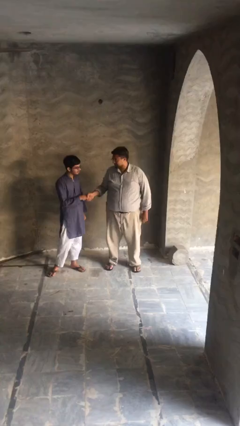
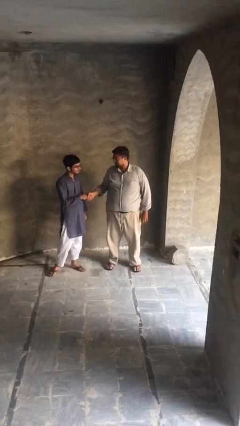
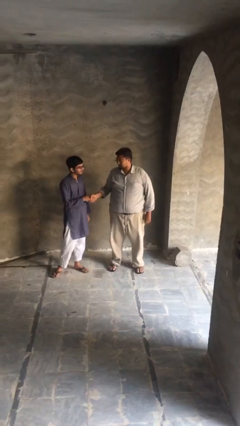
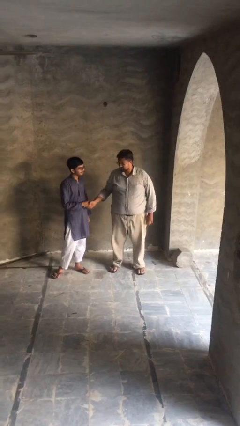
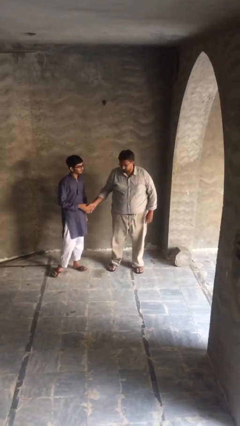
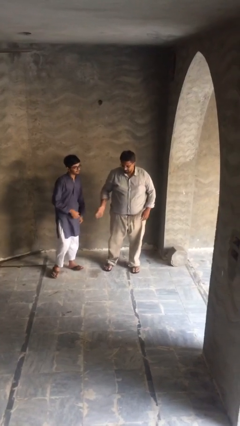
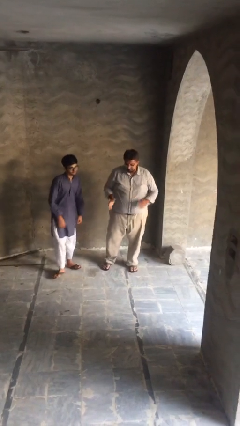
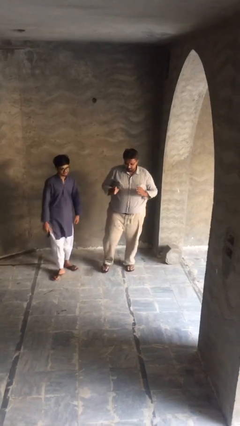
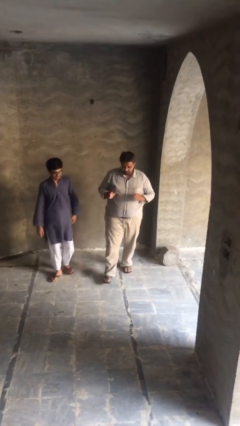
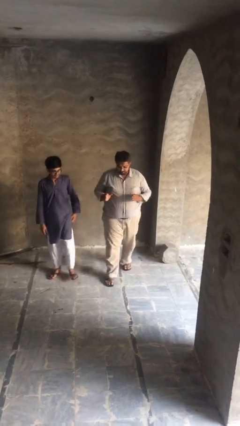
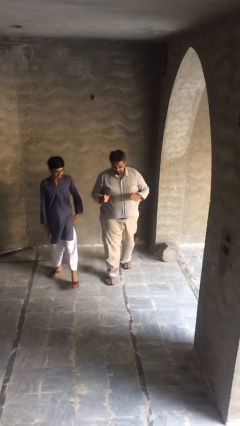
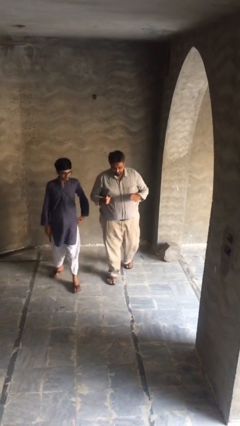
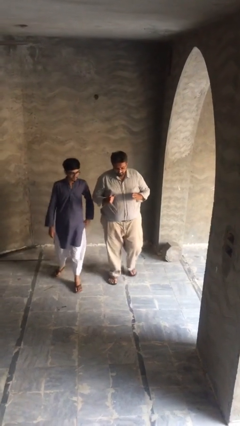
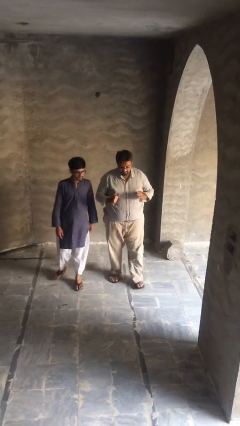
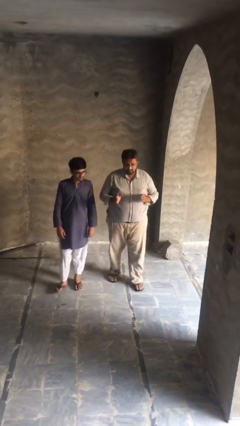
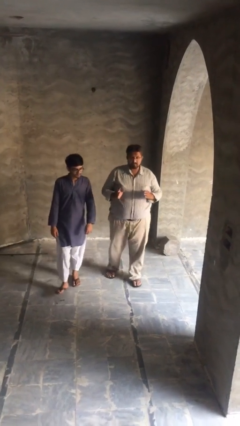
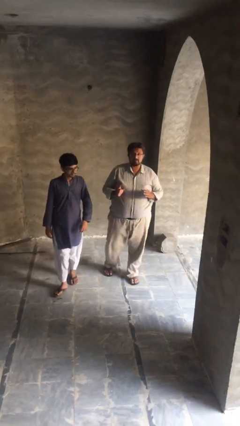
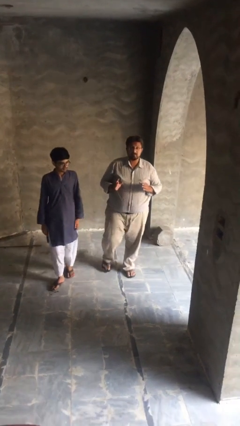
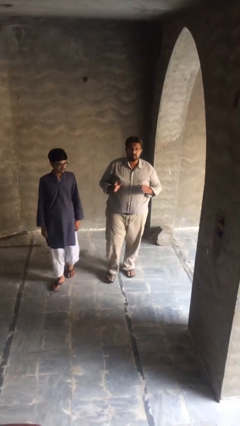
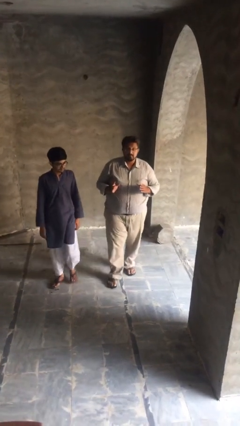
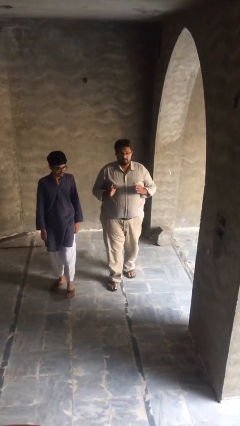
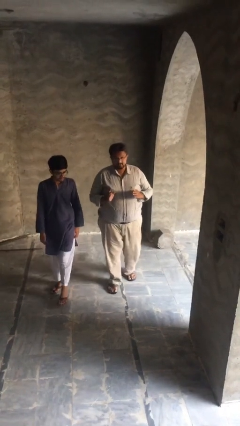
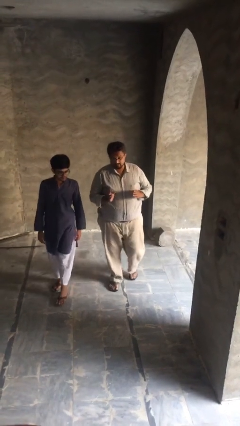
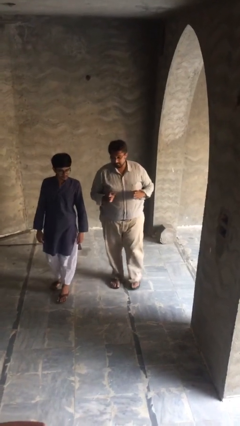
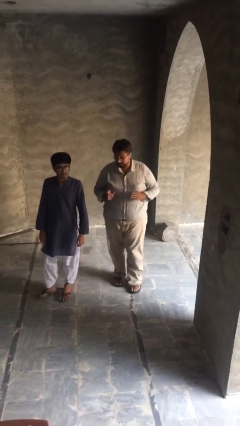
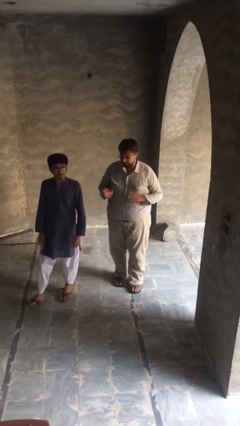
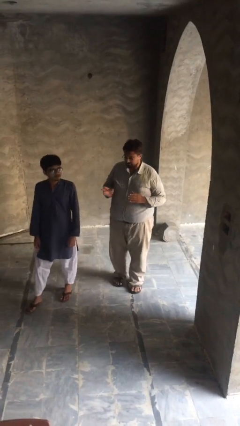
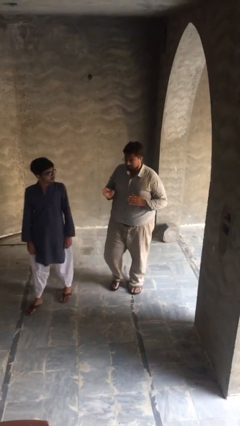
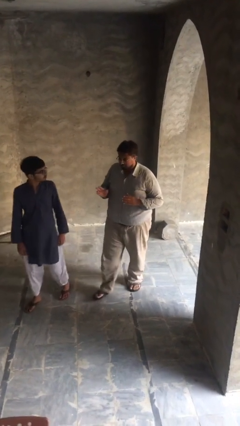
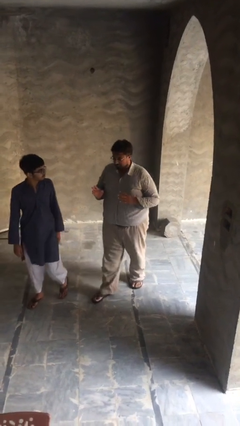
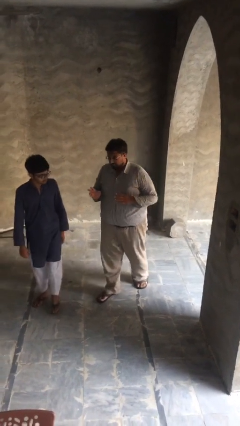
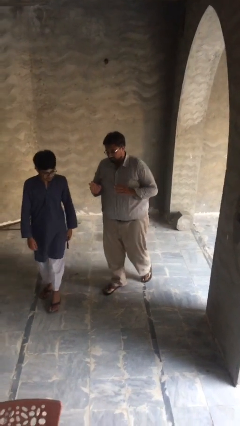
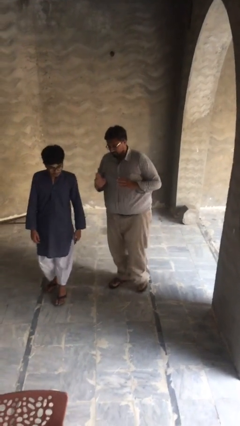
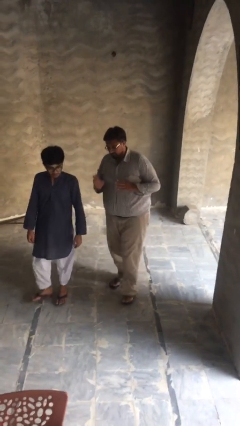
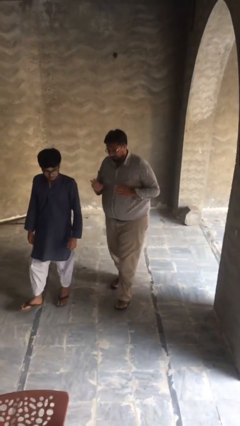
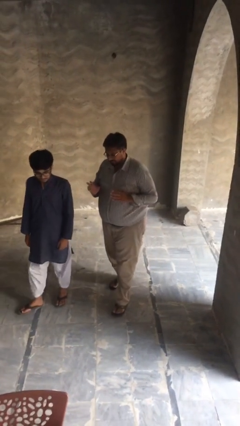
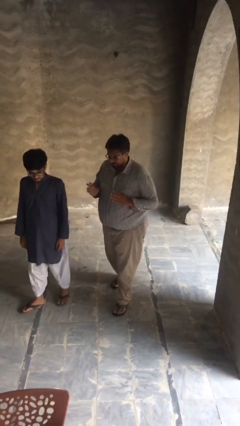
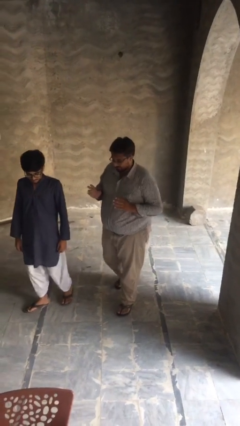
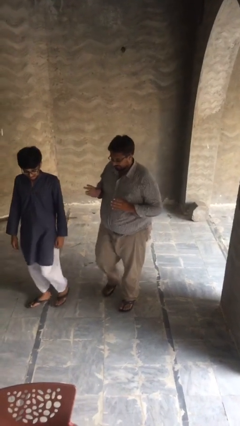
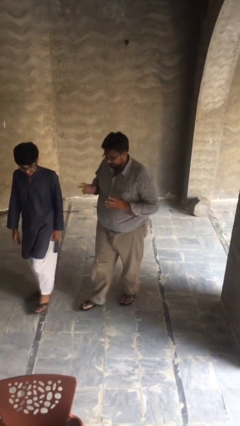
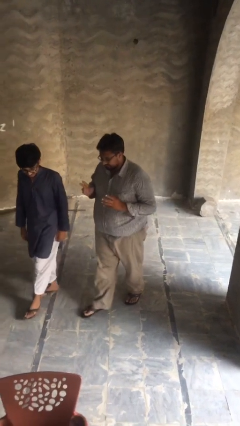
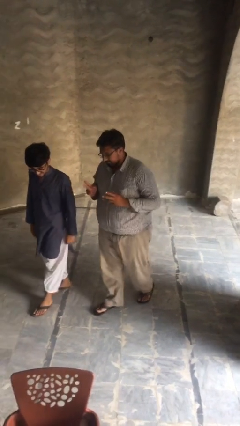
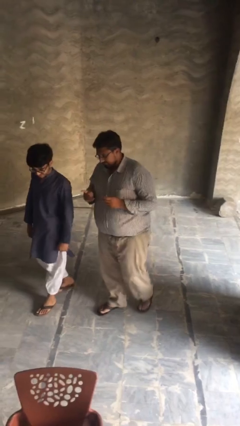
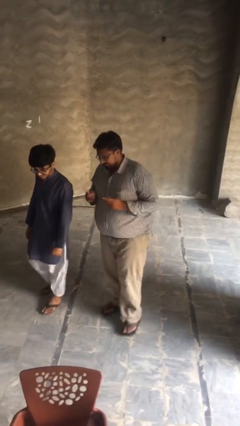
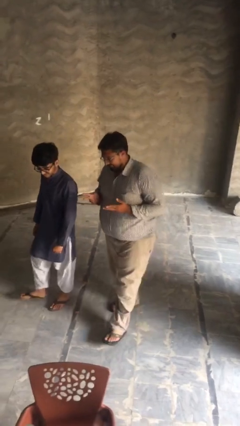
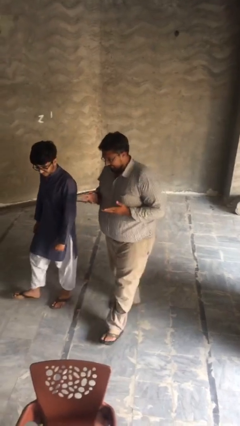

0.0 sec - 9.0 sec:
person talks to person

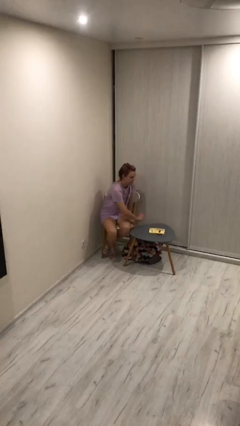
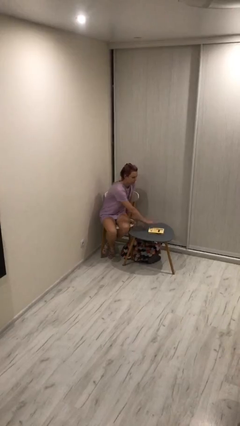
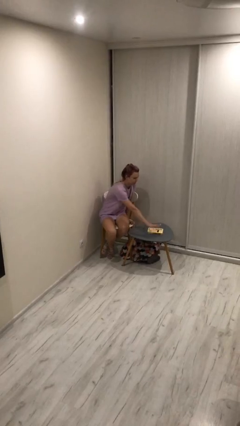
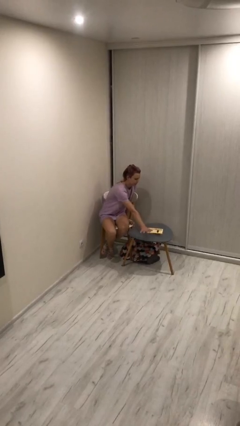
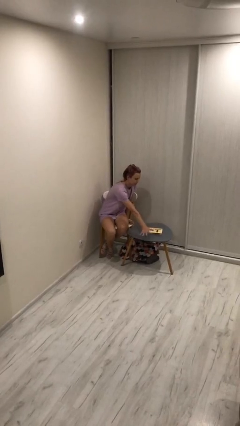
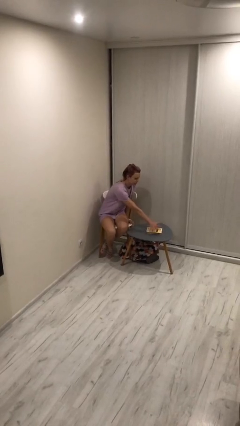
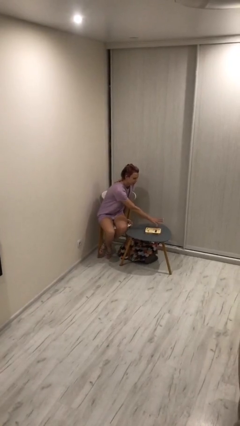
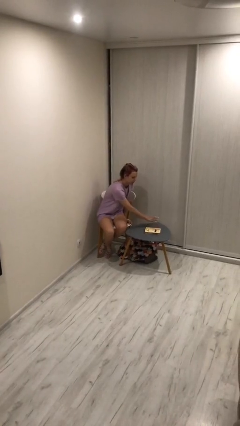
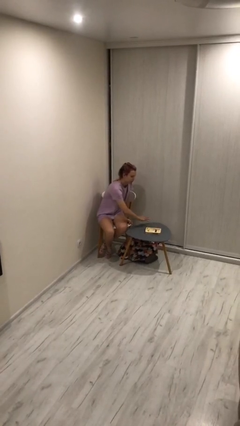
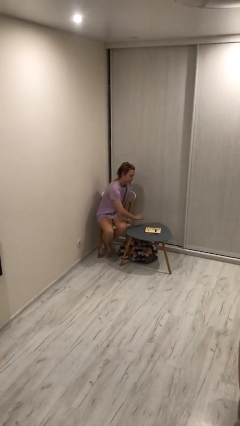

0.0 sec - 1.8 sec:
person waves hand over object

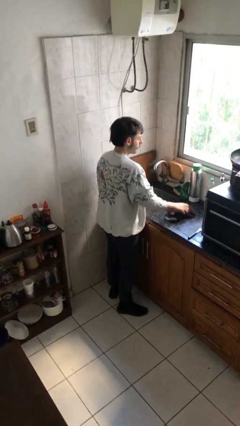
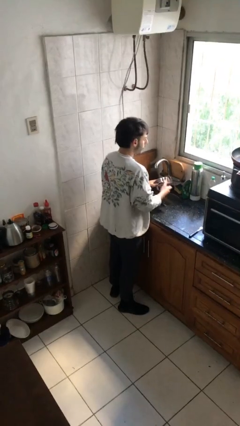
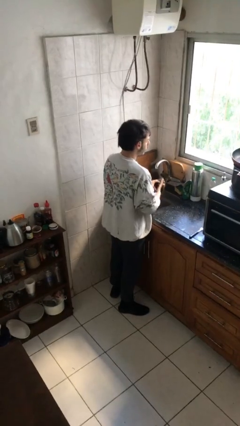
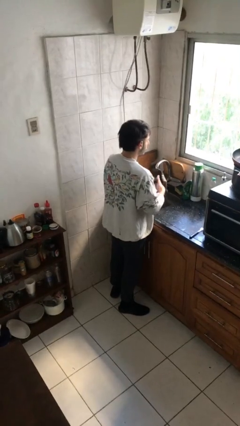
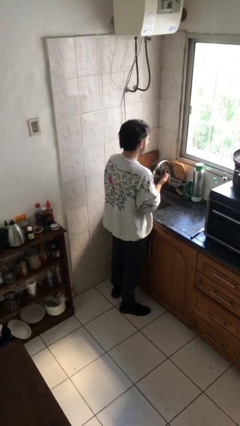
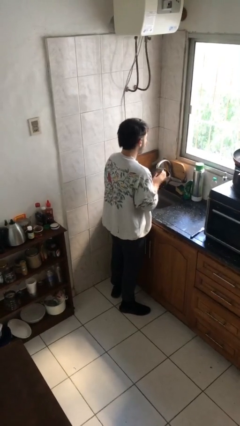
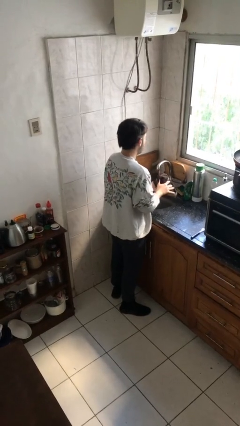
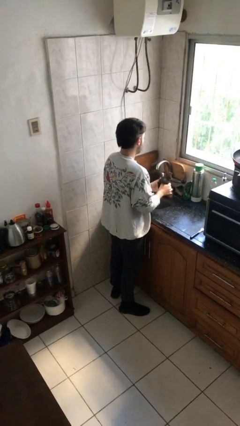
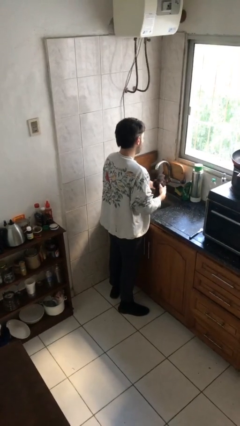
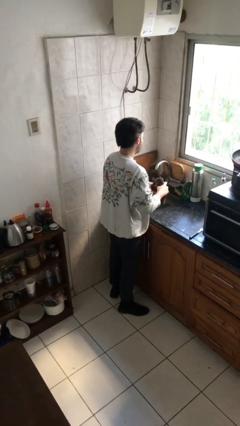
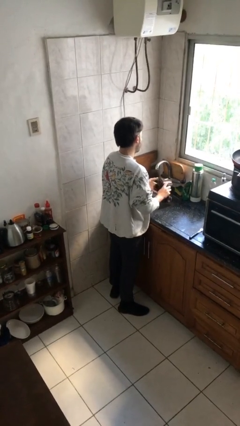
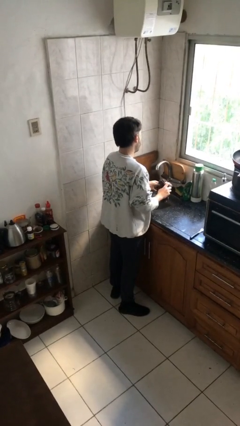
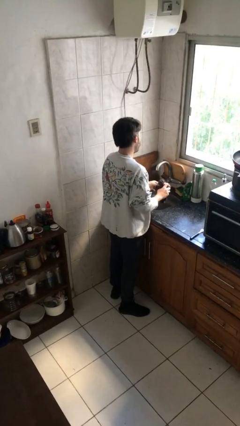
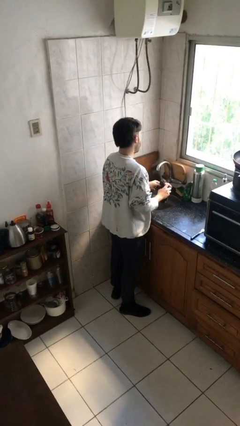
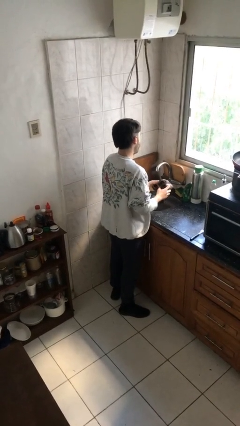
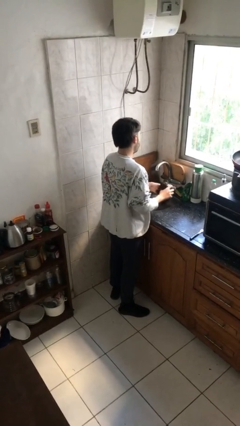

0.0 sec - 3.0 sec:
person dries hands with towel

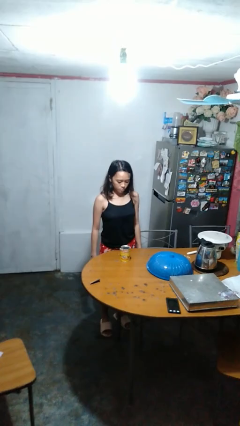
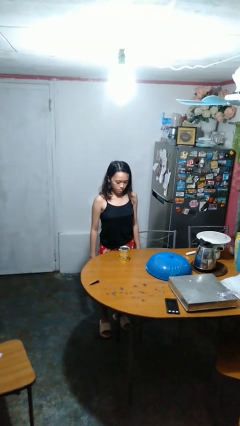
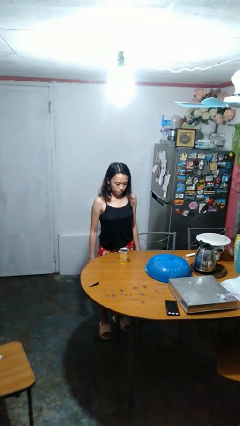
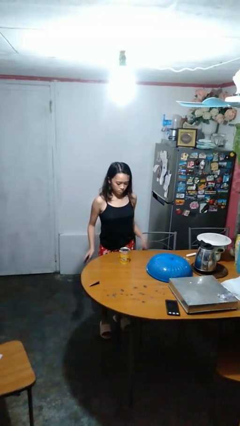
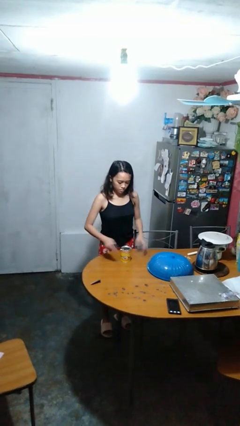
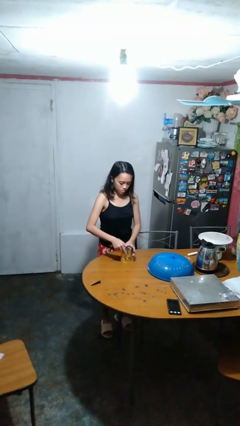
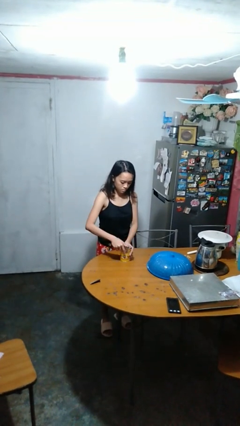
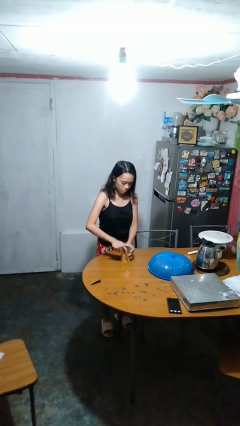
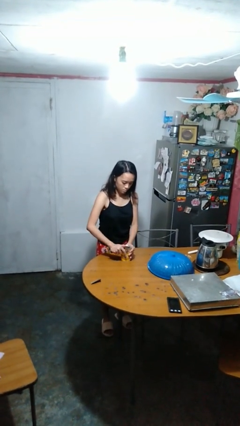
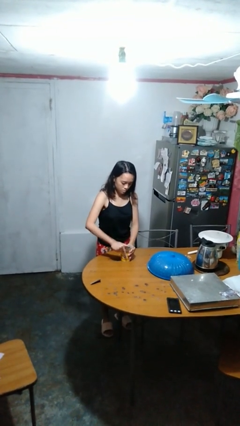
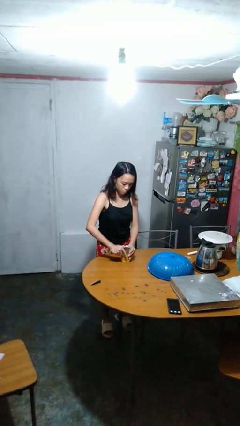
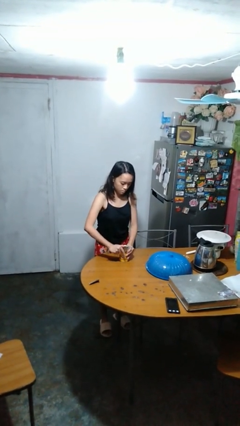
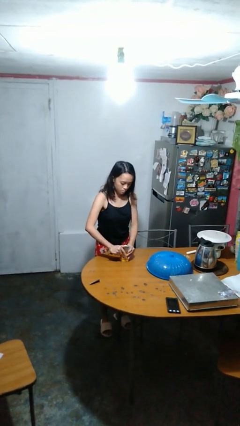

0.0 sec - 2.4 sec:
person opens can with can opener

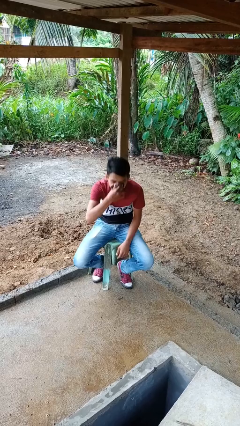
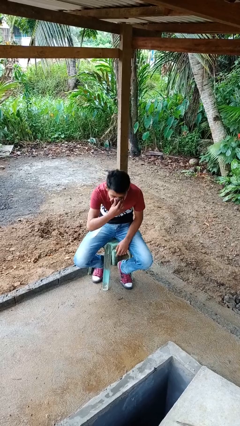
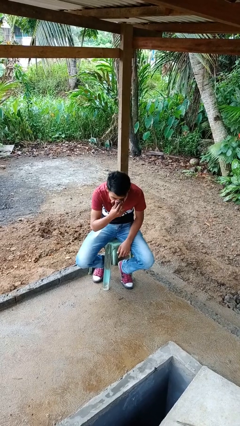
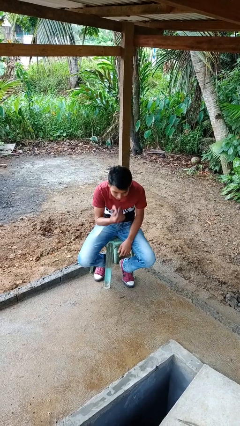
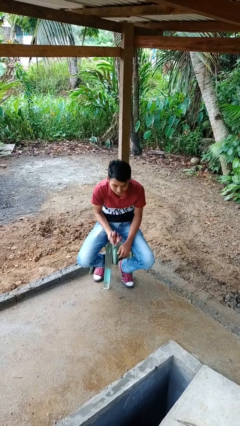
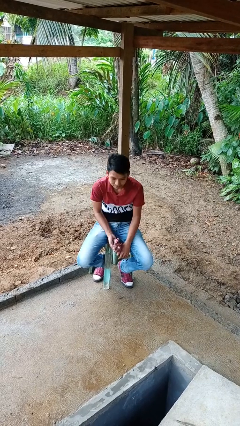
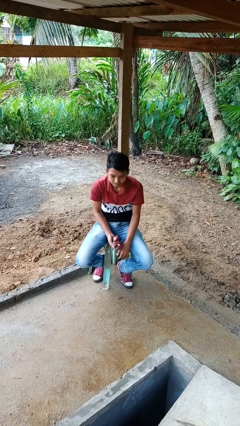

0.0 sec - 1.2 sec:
person blows nose

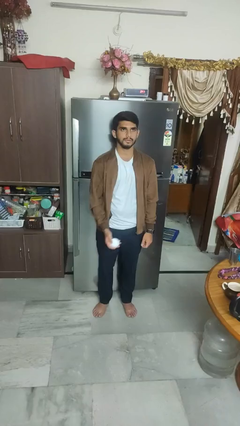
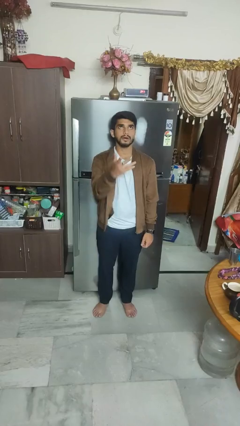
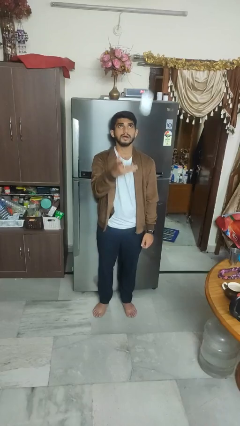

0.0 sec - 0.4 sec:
person throws object into air
